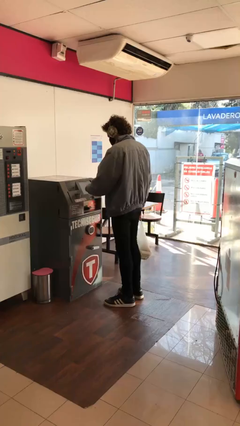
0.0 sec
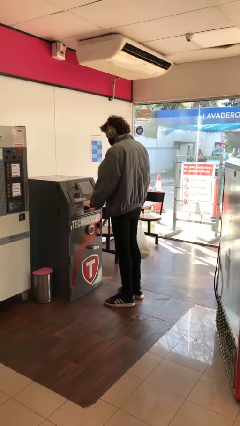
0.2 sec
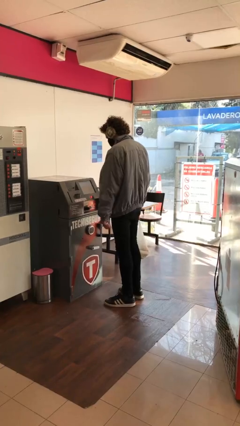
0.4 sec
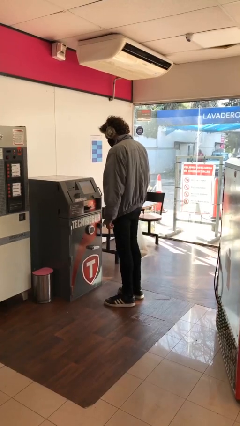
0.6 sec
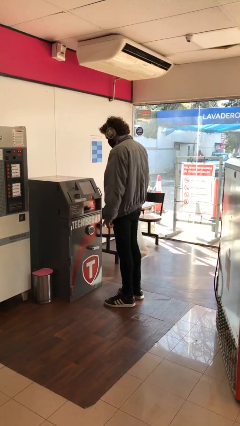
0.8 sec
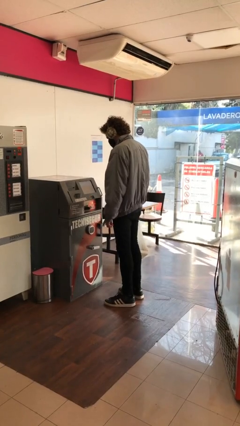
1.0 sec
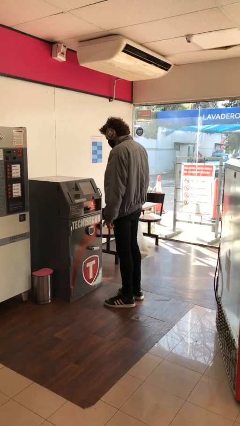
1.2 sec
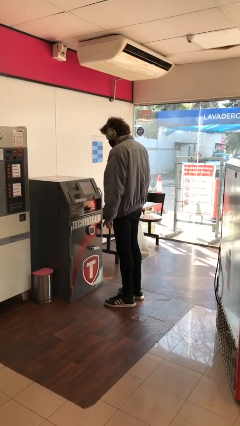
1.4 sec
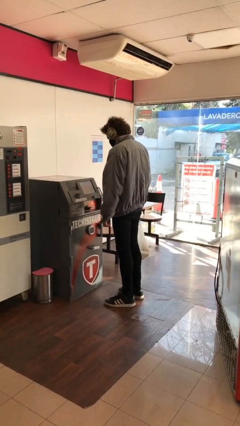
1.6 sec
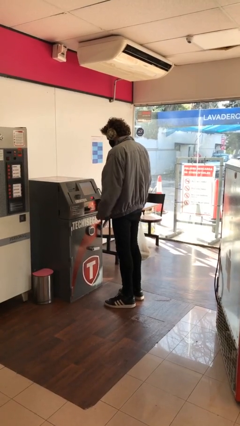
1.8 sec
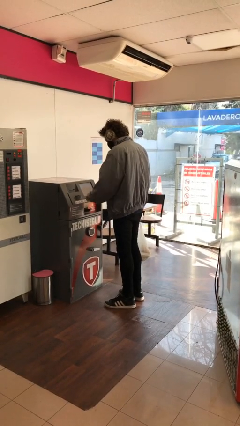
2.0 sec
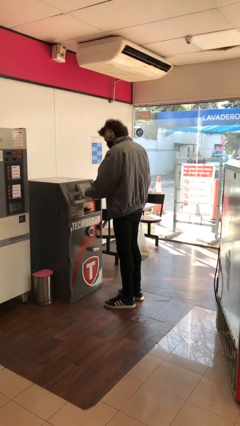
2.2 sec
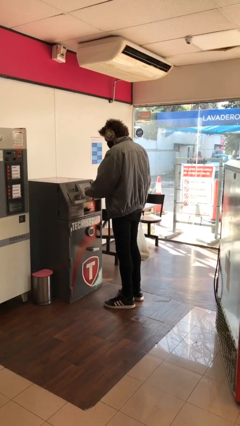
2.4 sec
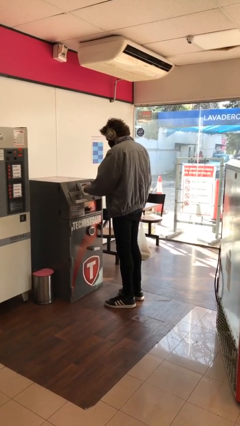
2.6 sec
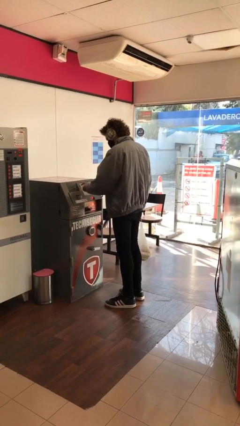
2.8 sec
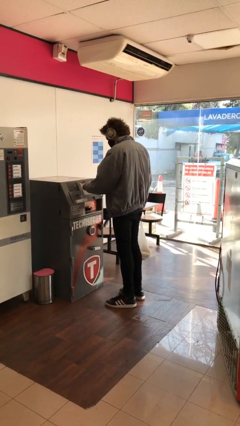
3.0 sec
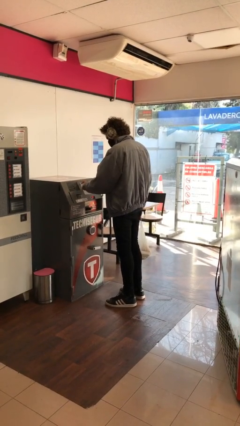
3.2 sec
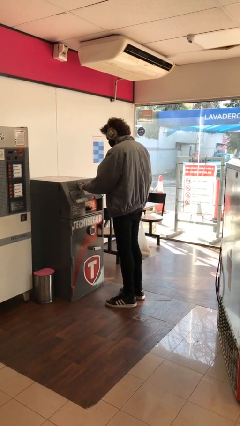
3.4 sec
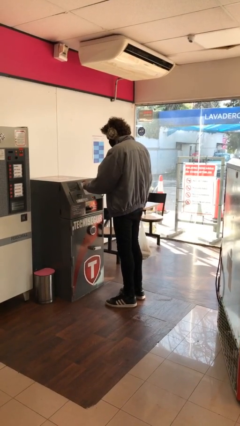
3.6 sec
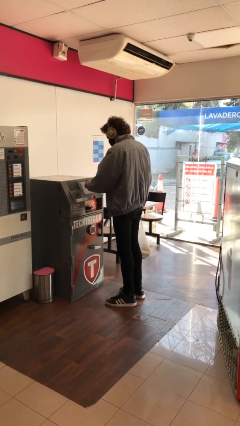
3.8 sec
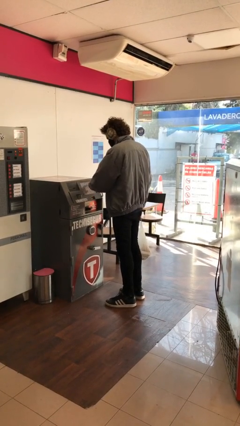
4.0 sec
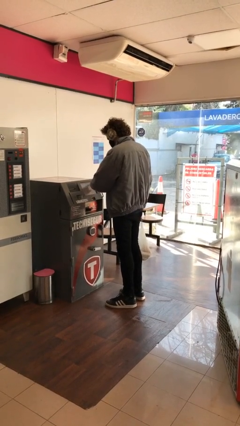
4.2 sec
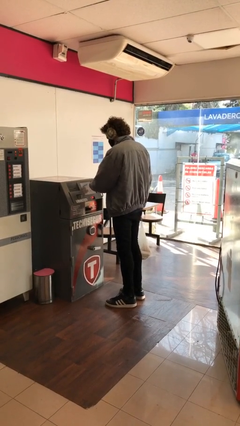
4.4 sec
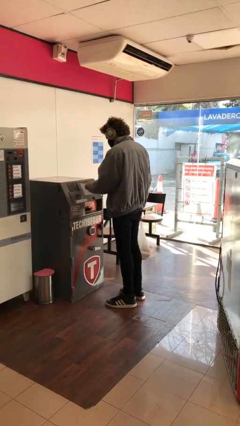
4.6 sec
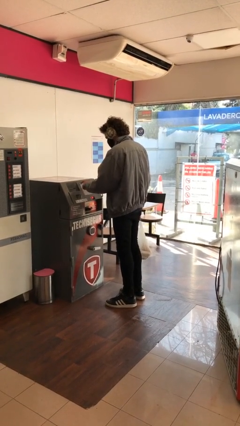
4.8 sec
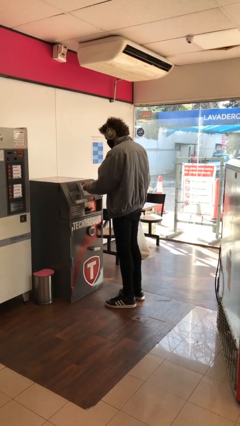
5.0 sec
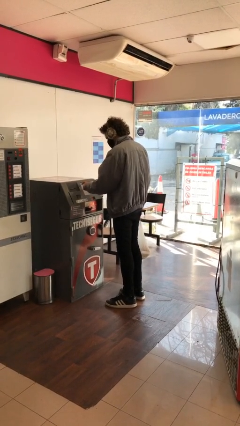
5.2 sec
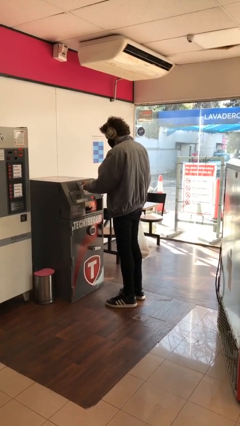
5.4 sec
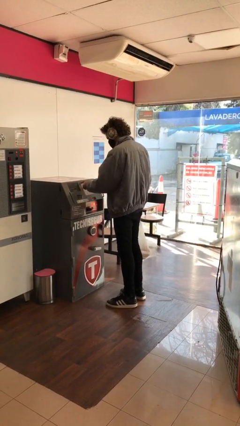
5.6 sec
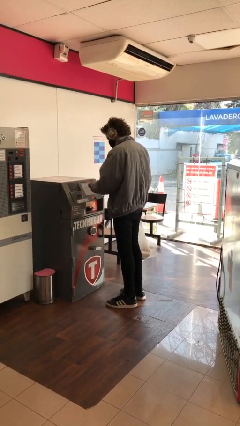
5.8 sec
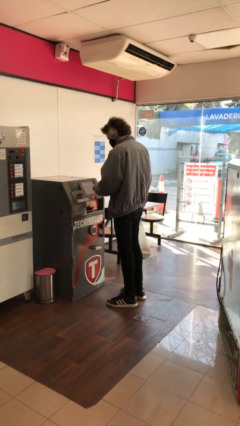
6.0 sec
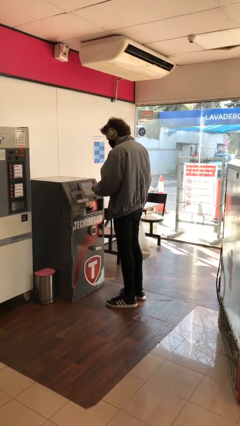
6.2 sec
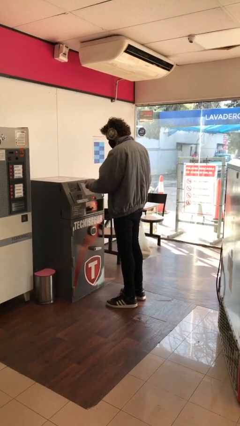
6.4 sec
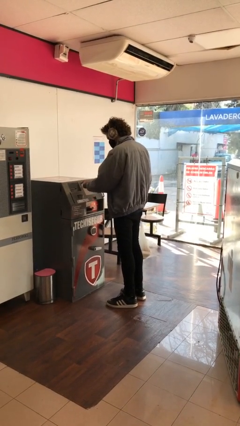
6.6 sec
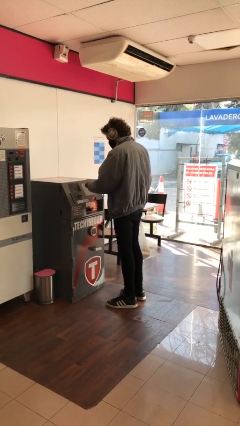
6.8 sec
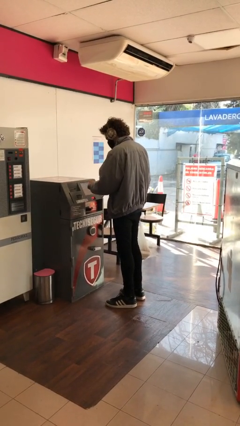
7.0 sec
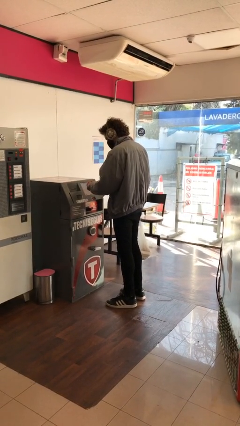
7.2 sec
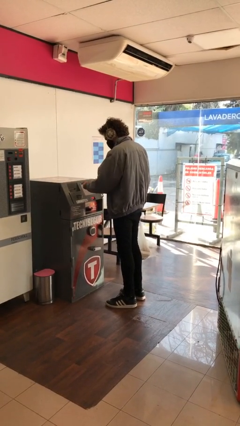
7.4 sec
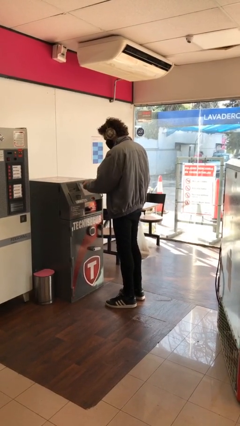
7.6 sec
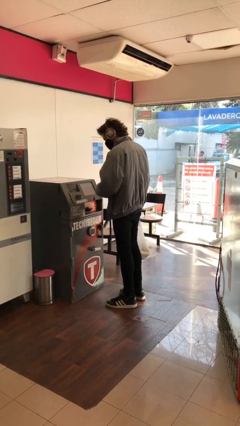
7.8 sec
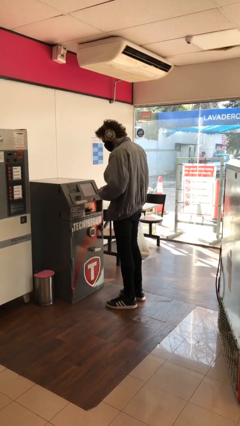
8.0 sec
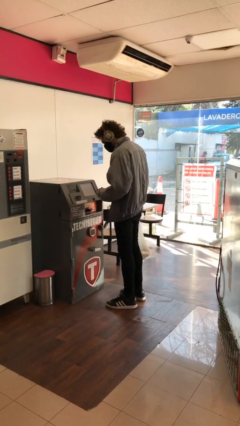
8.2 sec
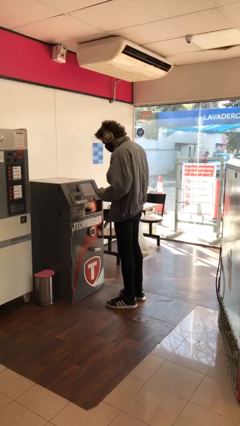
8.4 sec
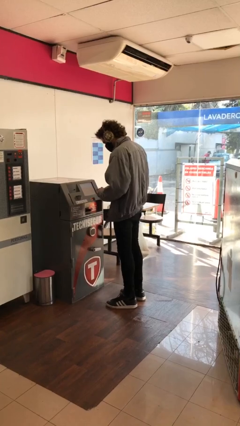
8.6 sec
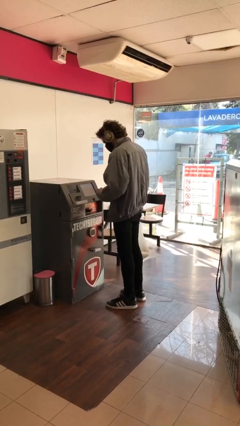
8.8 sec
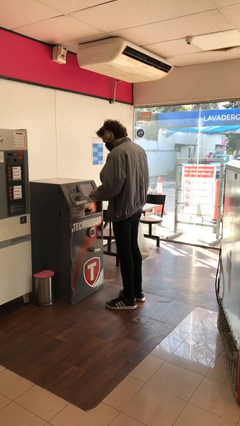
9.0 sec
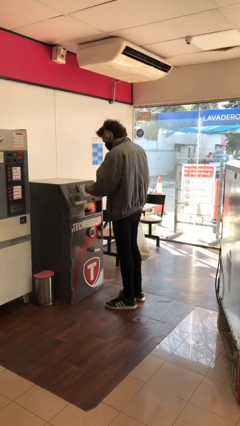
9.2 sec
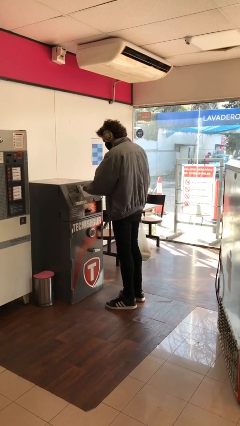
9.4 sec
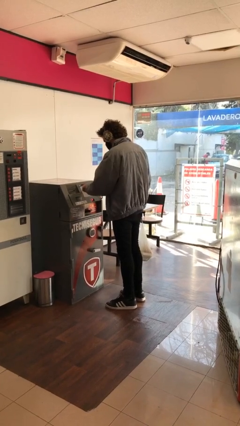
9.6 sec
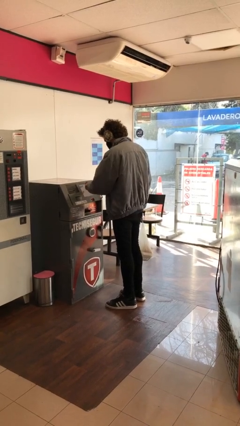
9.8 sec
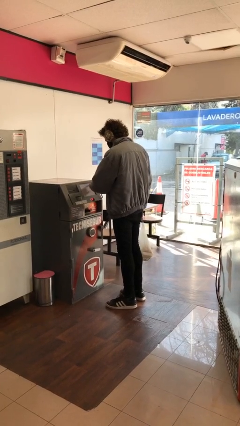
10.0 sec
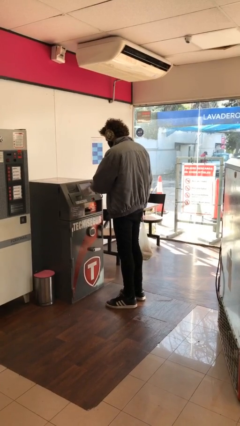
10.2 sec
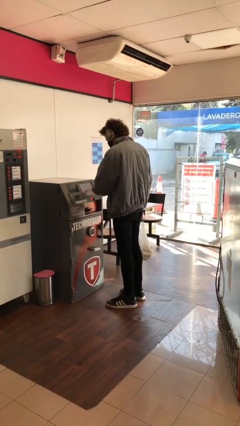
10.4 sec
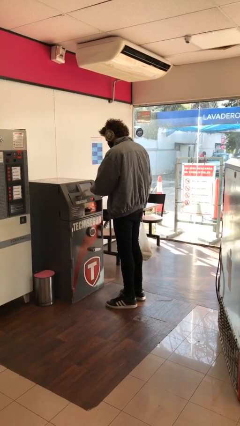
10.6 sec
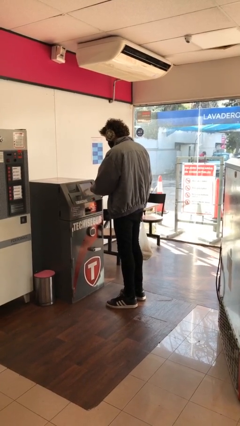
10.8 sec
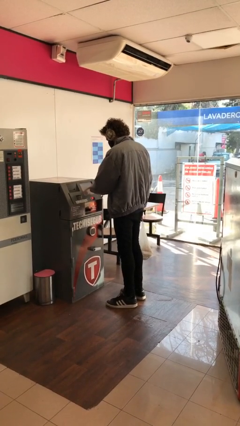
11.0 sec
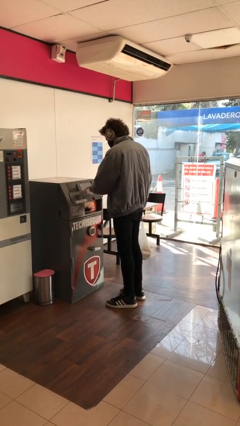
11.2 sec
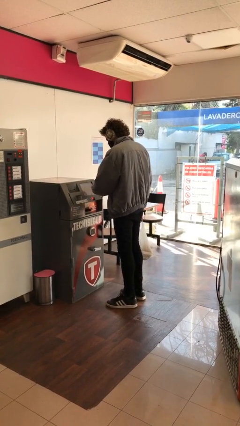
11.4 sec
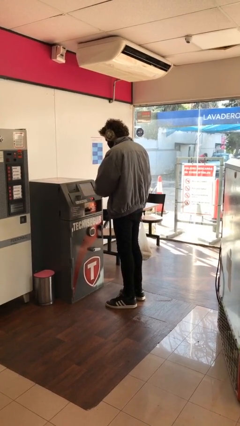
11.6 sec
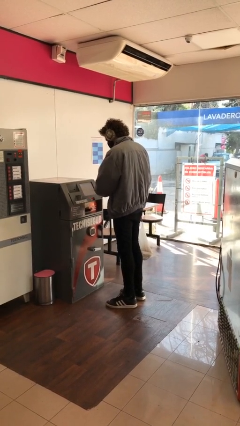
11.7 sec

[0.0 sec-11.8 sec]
person purchases from machine

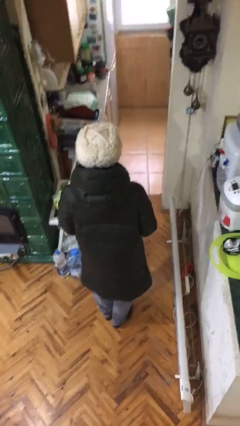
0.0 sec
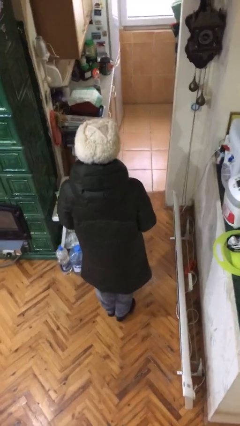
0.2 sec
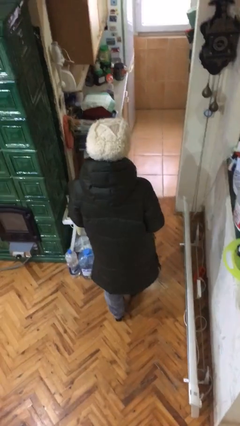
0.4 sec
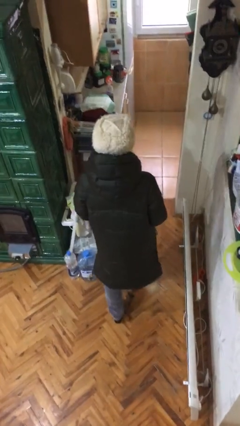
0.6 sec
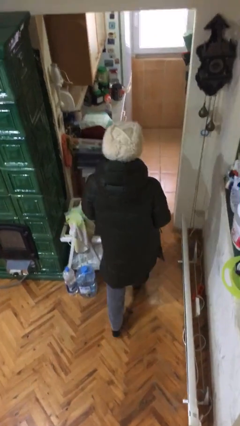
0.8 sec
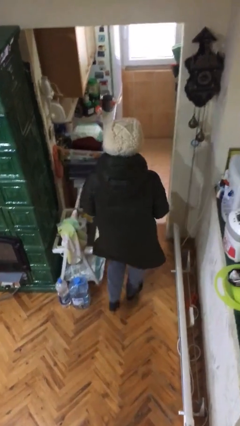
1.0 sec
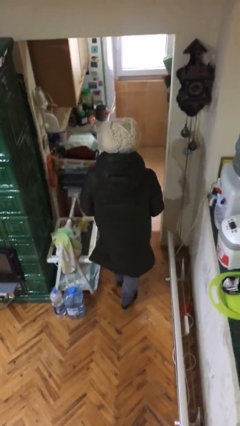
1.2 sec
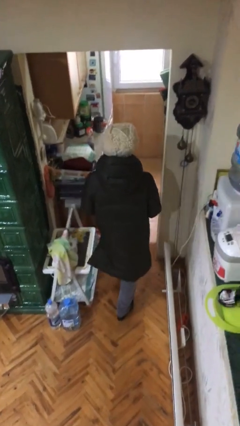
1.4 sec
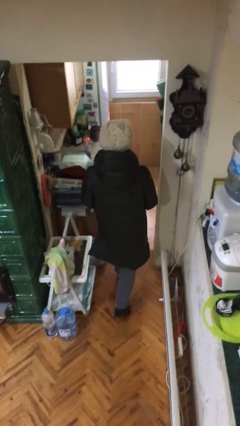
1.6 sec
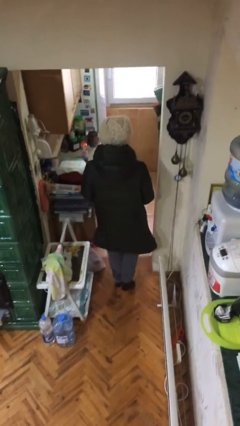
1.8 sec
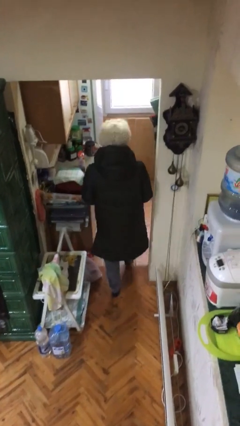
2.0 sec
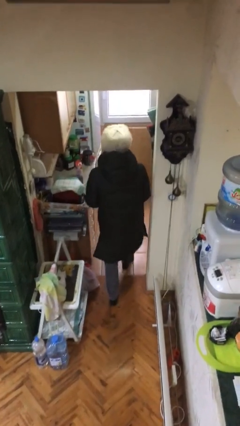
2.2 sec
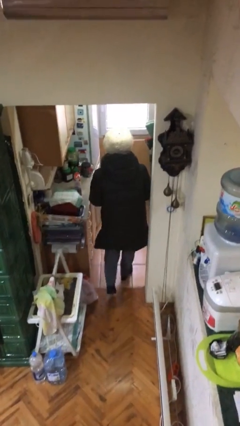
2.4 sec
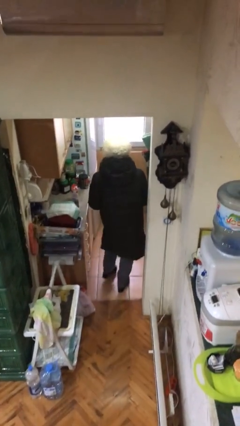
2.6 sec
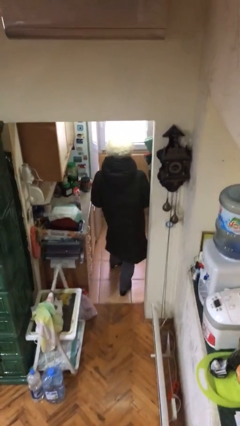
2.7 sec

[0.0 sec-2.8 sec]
person exits scene through structure

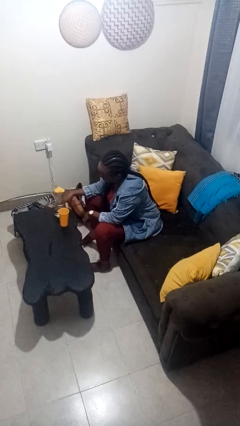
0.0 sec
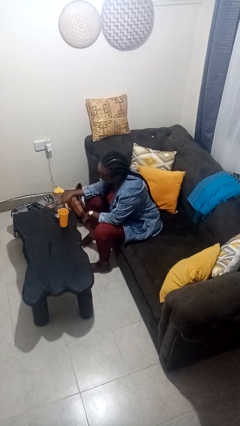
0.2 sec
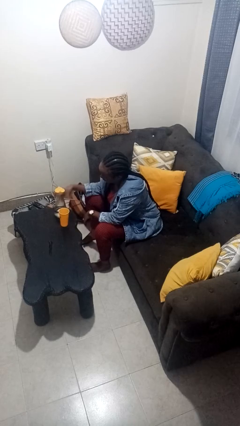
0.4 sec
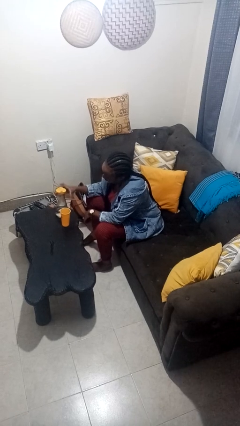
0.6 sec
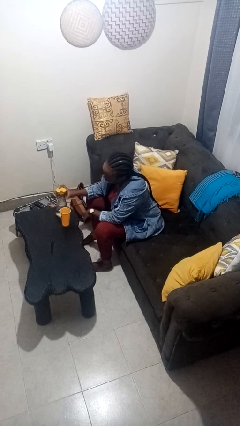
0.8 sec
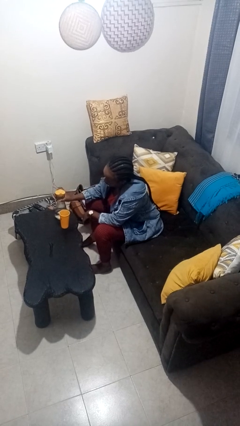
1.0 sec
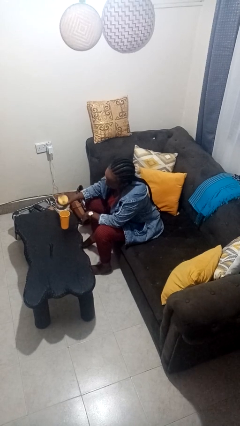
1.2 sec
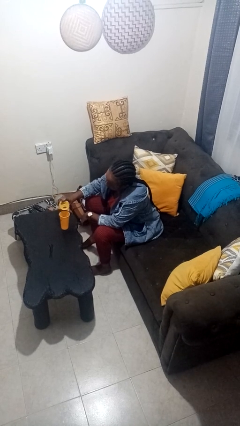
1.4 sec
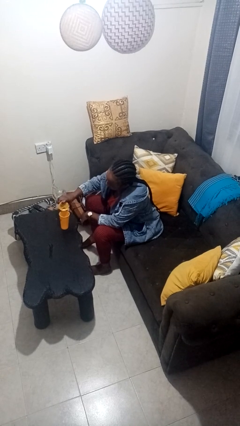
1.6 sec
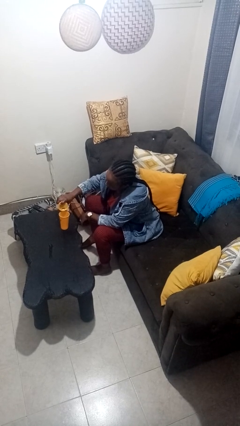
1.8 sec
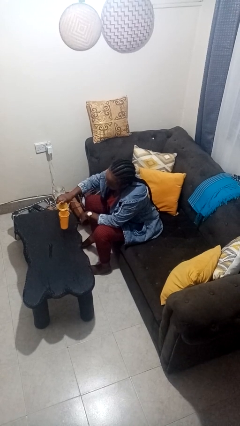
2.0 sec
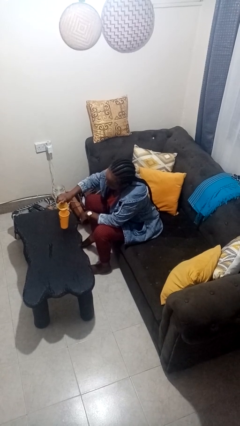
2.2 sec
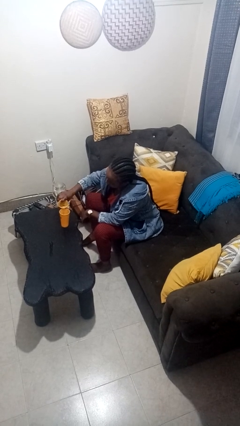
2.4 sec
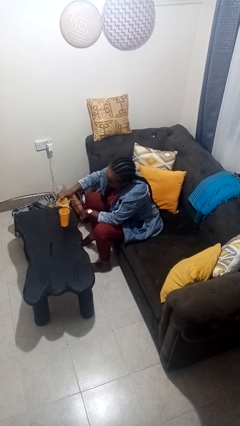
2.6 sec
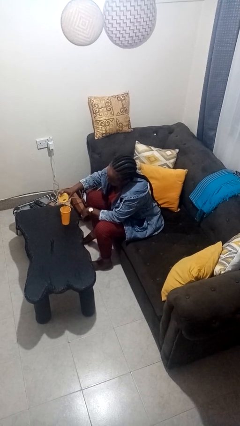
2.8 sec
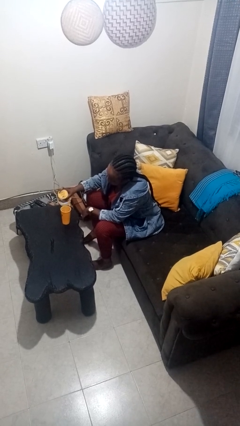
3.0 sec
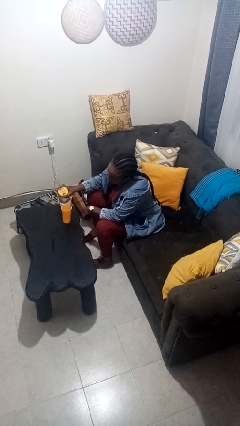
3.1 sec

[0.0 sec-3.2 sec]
person pours liquid into cup

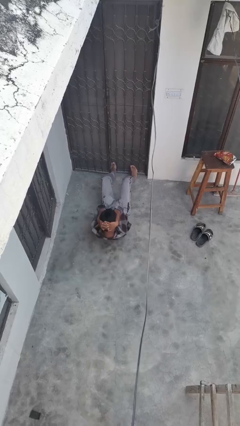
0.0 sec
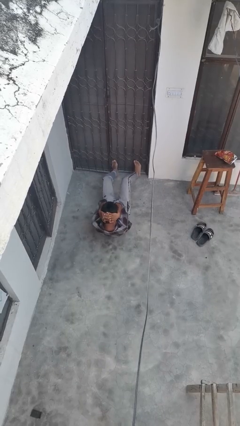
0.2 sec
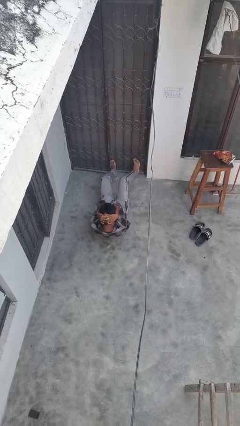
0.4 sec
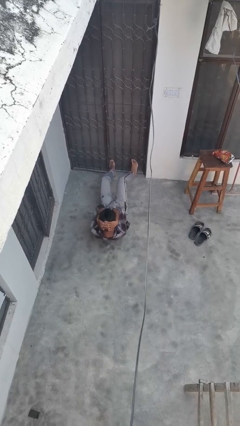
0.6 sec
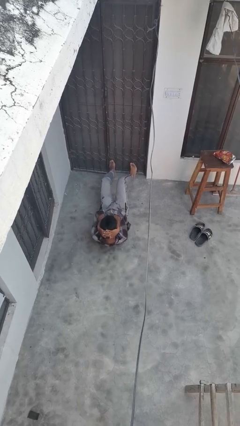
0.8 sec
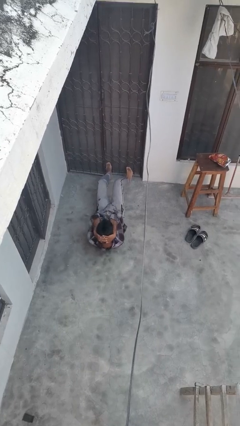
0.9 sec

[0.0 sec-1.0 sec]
person exercises with situp
